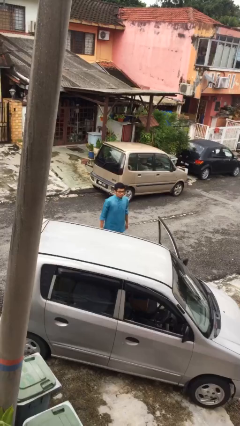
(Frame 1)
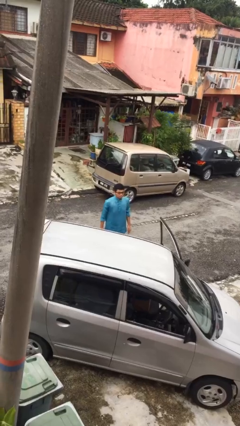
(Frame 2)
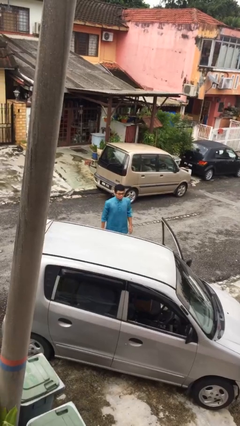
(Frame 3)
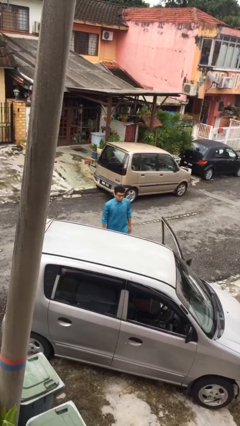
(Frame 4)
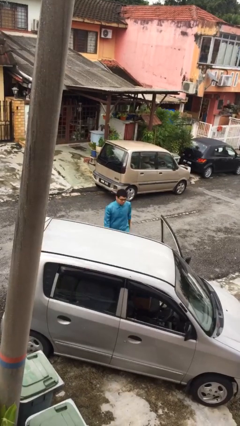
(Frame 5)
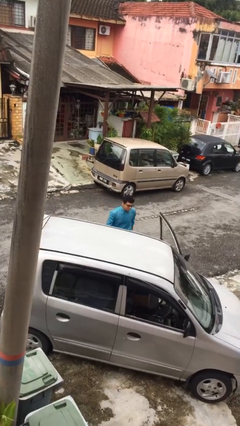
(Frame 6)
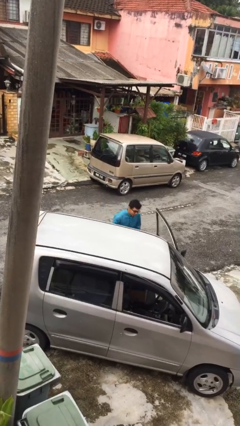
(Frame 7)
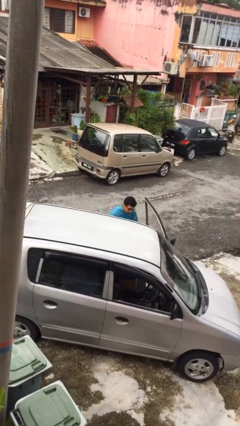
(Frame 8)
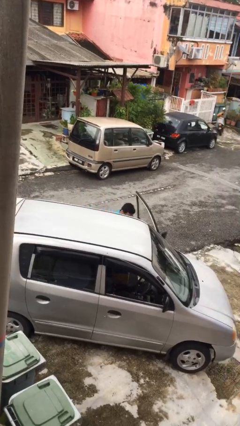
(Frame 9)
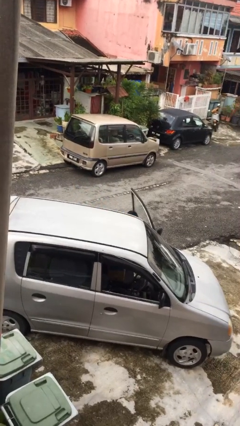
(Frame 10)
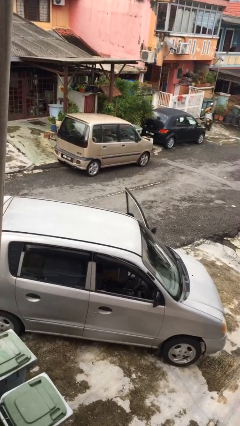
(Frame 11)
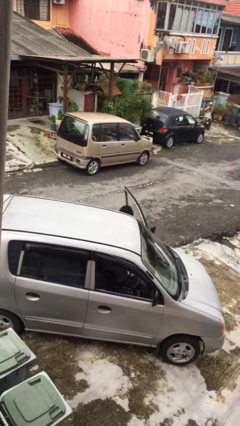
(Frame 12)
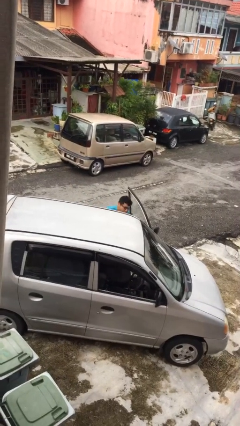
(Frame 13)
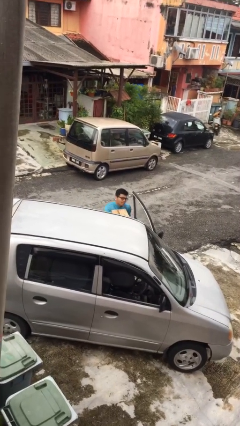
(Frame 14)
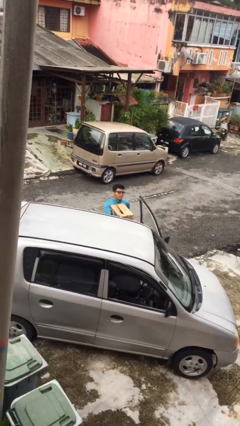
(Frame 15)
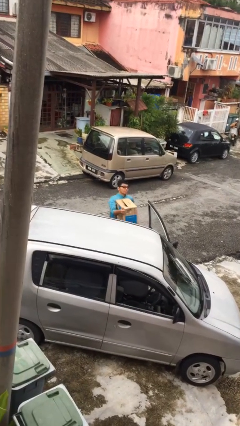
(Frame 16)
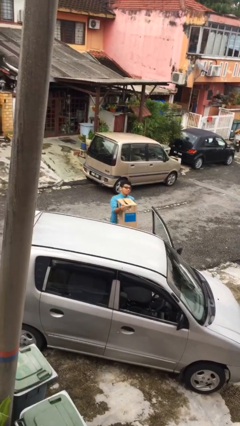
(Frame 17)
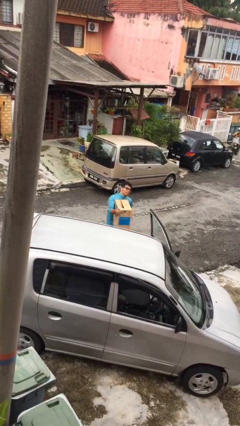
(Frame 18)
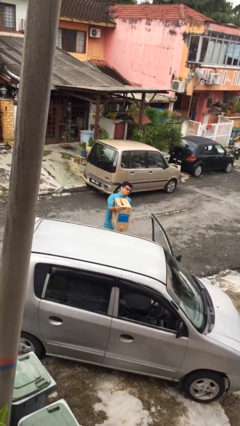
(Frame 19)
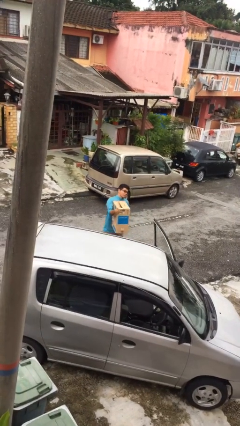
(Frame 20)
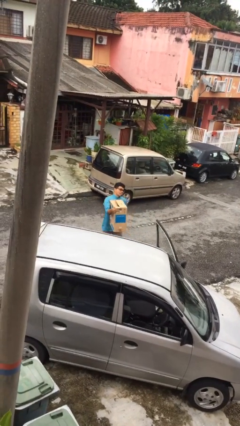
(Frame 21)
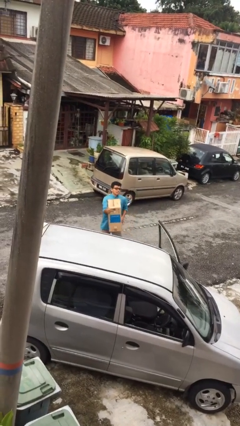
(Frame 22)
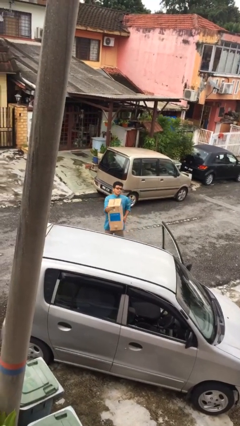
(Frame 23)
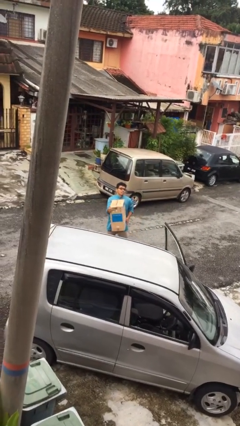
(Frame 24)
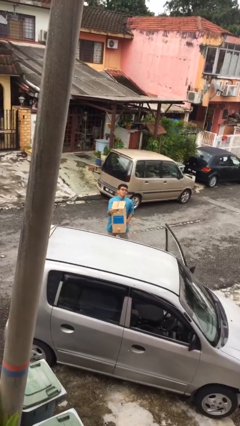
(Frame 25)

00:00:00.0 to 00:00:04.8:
person unloads car

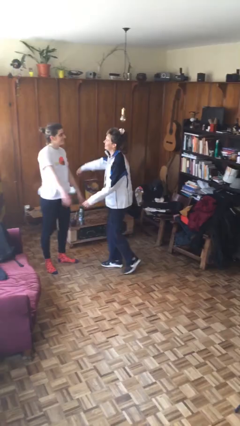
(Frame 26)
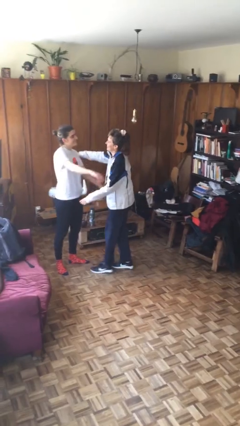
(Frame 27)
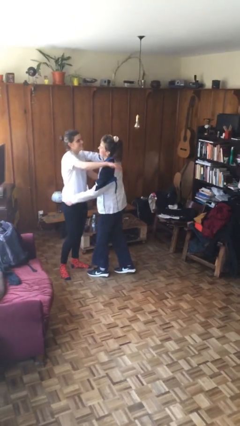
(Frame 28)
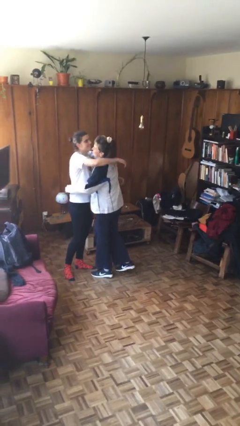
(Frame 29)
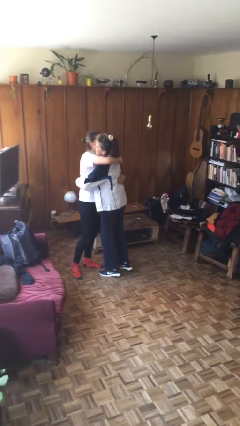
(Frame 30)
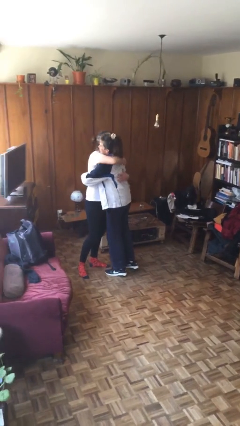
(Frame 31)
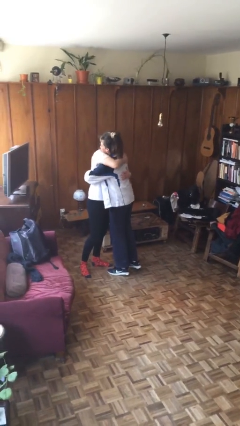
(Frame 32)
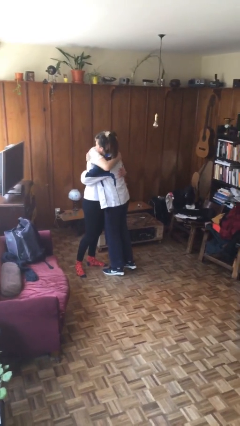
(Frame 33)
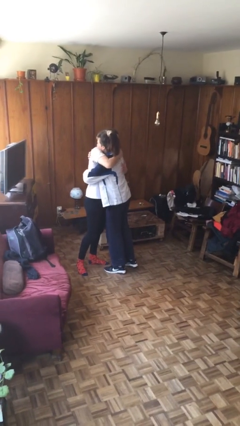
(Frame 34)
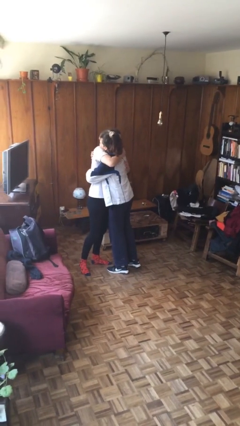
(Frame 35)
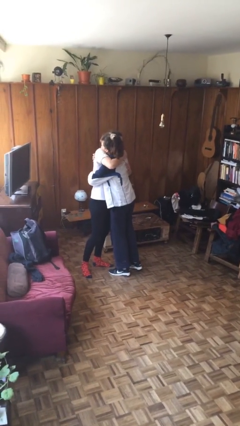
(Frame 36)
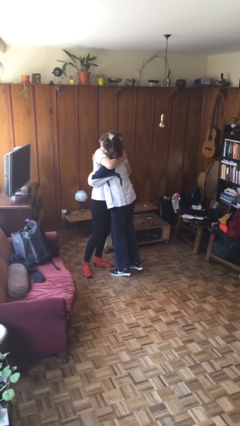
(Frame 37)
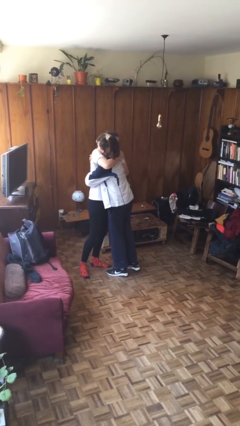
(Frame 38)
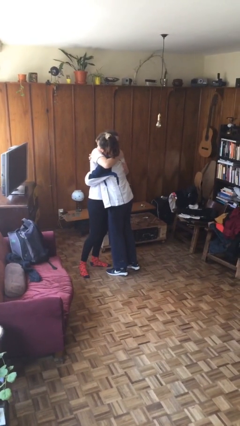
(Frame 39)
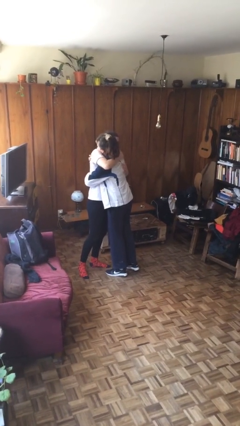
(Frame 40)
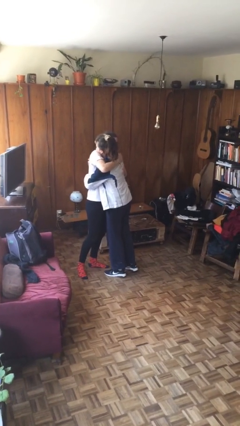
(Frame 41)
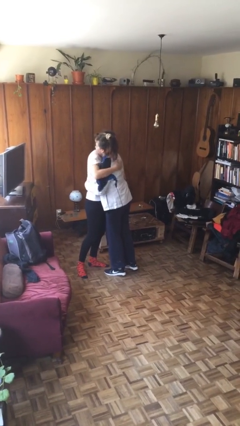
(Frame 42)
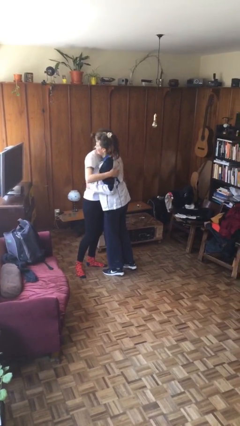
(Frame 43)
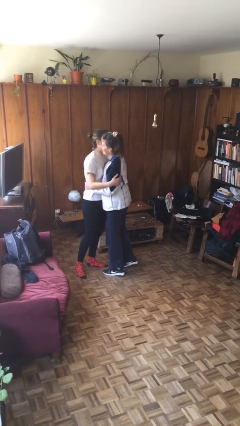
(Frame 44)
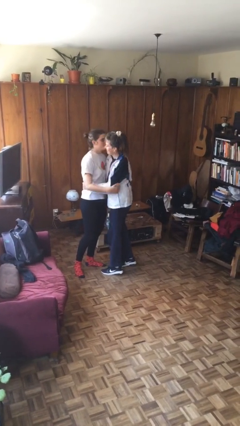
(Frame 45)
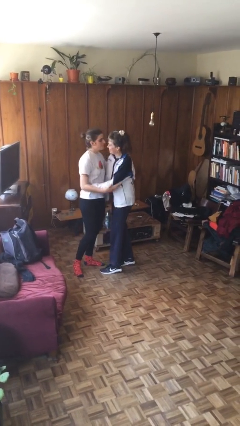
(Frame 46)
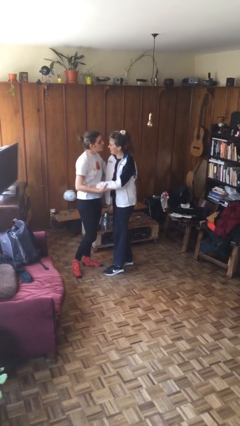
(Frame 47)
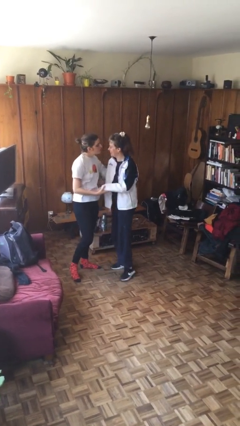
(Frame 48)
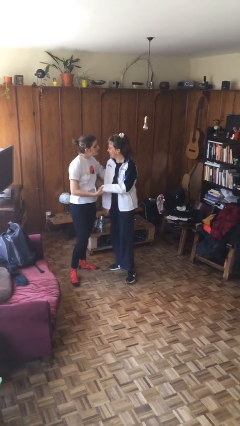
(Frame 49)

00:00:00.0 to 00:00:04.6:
person embraces person

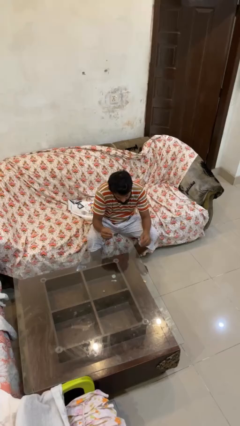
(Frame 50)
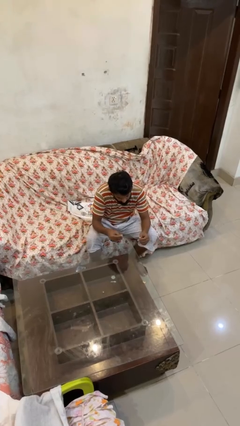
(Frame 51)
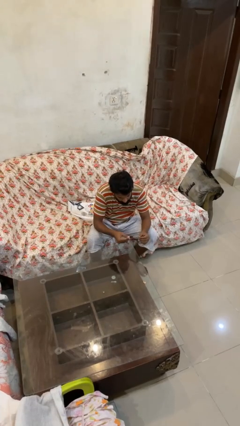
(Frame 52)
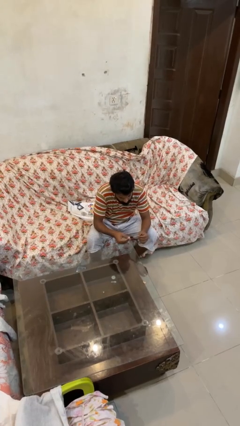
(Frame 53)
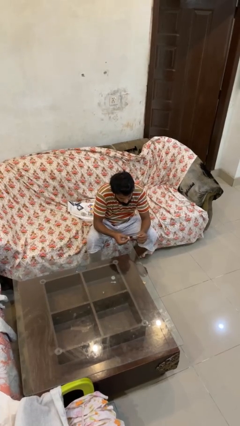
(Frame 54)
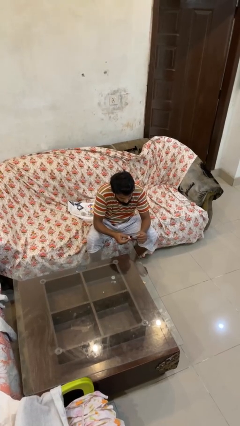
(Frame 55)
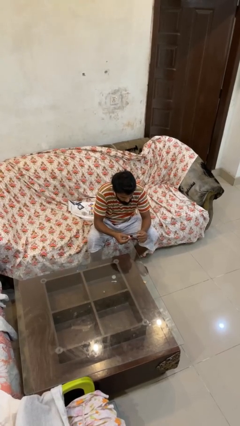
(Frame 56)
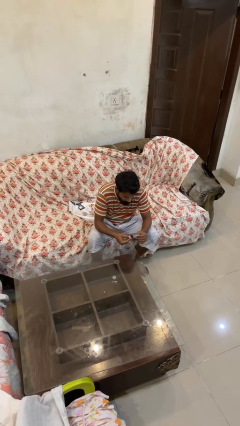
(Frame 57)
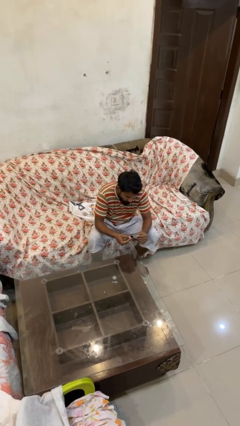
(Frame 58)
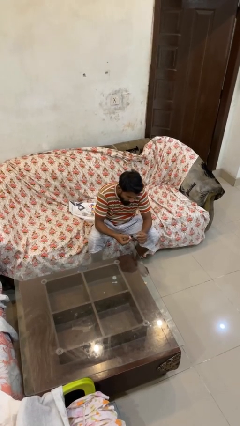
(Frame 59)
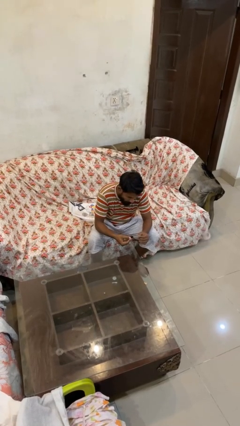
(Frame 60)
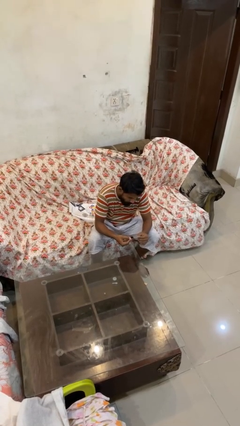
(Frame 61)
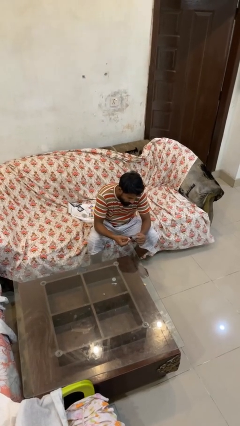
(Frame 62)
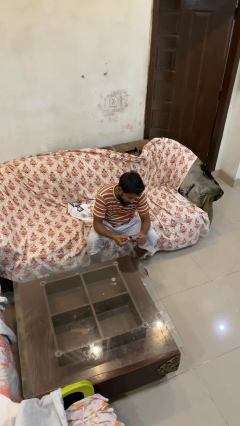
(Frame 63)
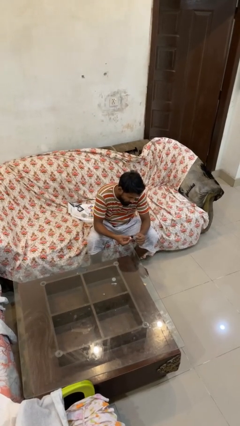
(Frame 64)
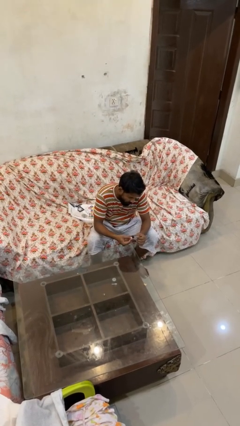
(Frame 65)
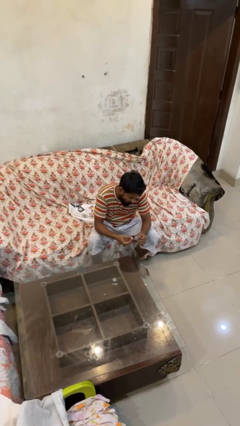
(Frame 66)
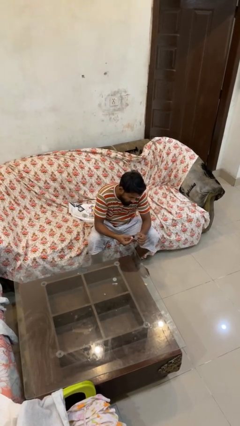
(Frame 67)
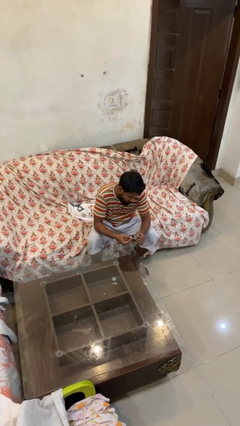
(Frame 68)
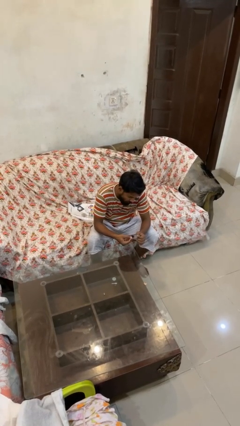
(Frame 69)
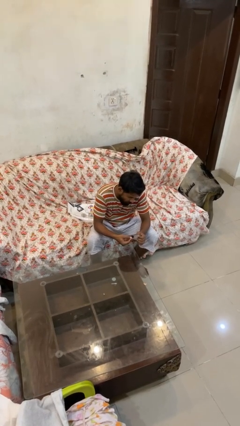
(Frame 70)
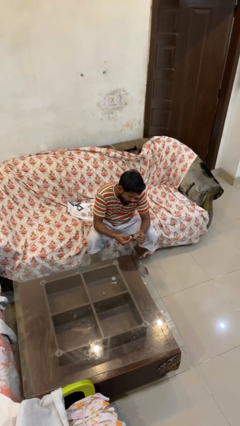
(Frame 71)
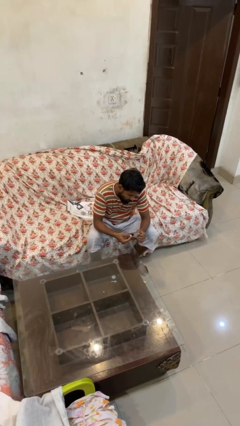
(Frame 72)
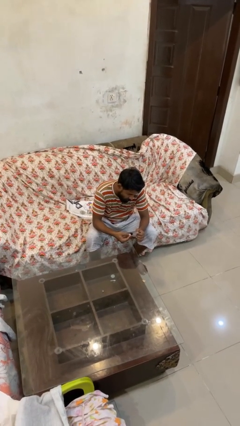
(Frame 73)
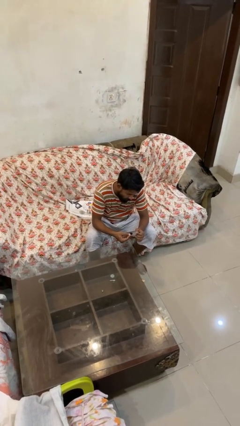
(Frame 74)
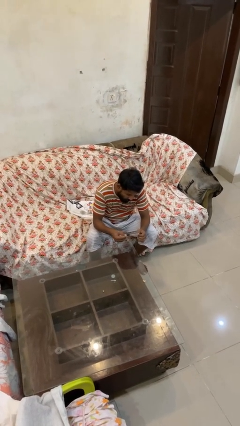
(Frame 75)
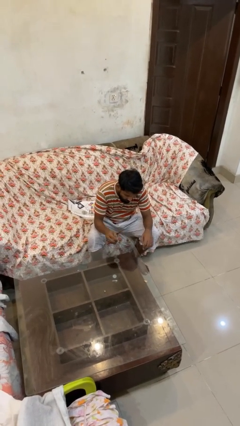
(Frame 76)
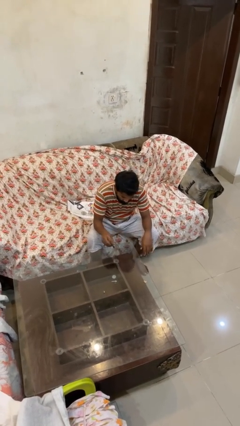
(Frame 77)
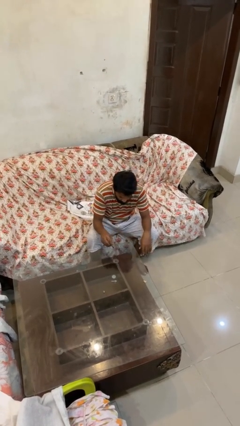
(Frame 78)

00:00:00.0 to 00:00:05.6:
person files fingernails

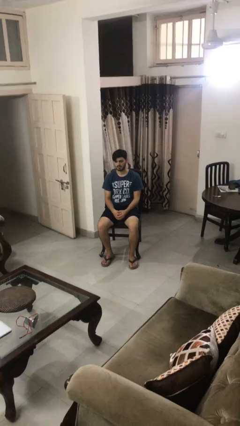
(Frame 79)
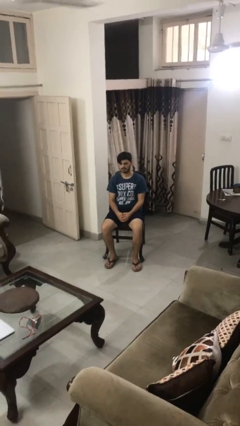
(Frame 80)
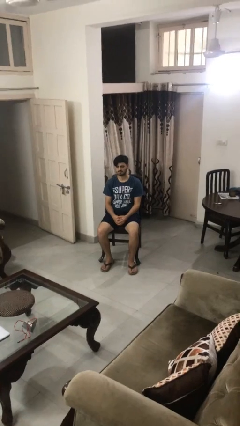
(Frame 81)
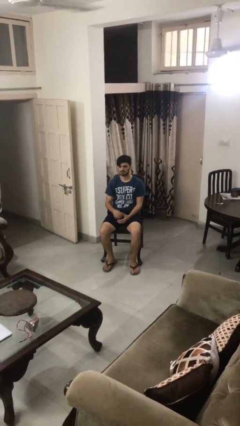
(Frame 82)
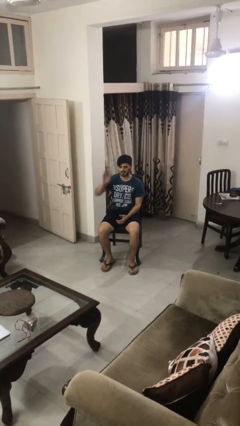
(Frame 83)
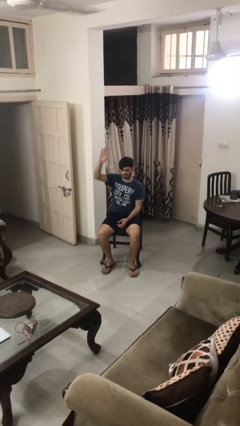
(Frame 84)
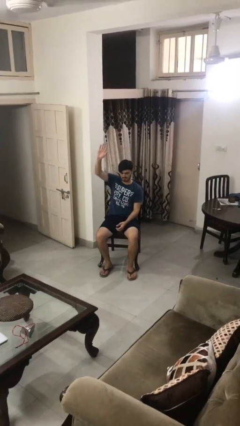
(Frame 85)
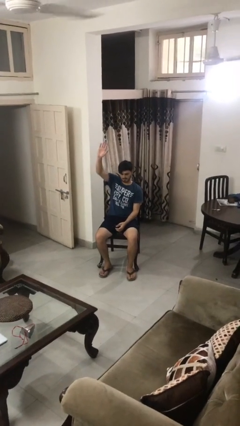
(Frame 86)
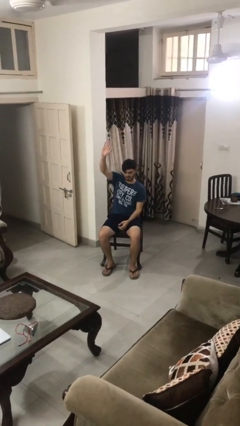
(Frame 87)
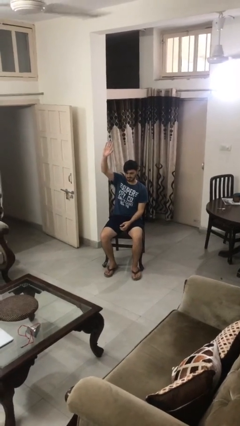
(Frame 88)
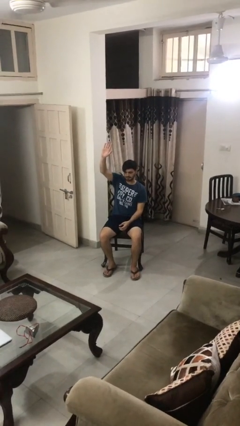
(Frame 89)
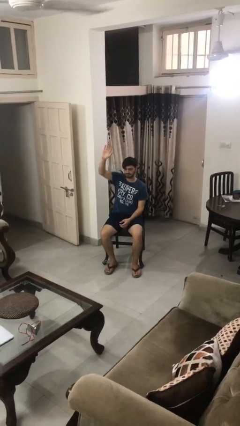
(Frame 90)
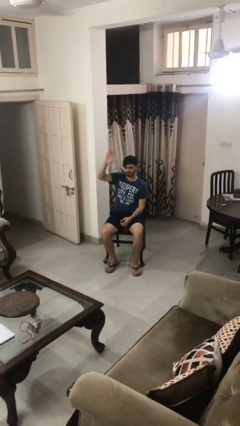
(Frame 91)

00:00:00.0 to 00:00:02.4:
person gestures raise hand

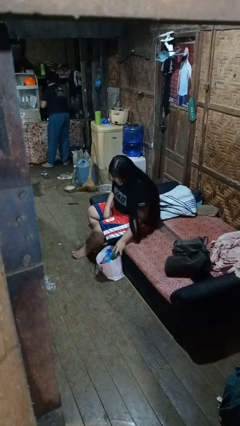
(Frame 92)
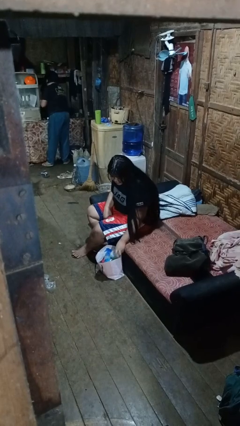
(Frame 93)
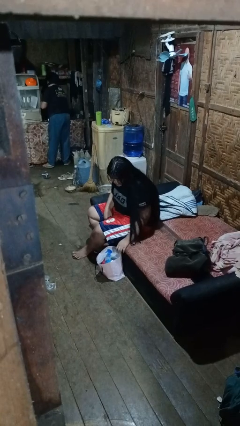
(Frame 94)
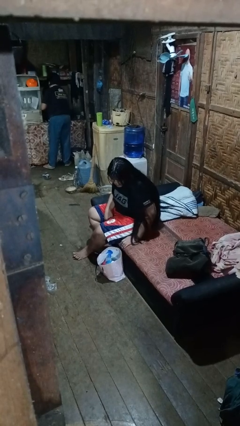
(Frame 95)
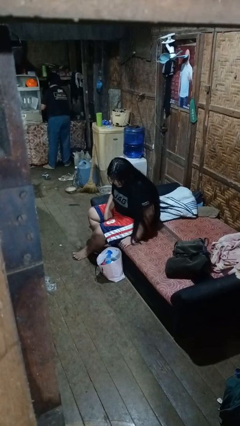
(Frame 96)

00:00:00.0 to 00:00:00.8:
person puts object into bag
